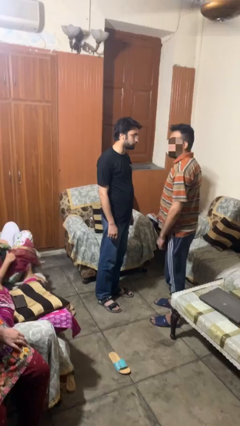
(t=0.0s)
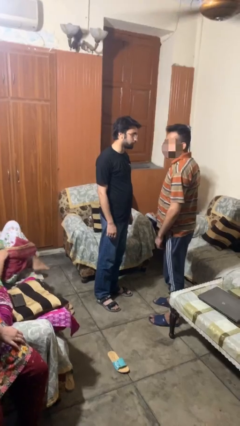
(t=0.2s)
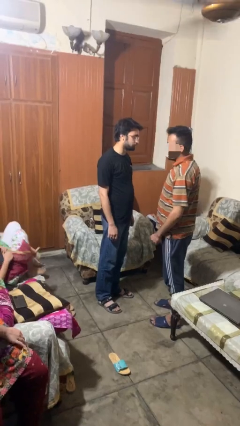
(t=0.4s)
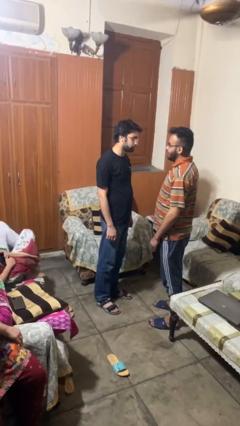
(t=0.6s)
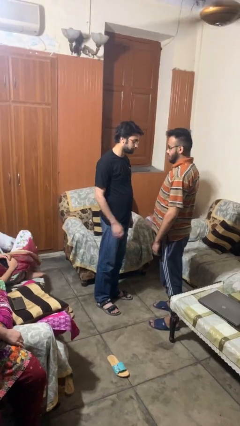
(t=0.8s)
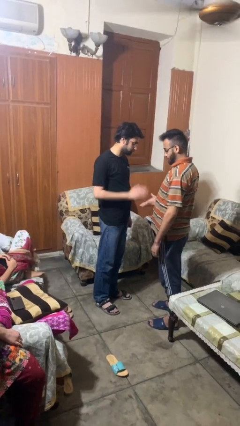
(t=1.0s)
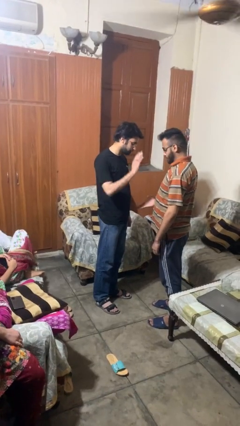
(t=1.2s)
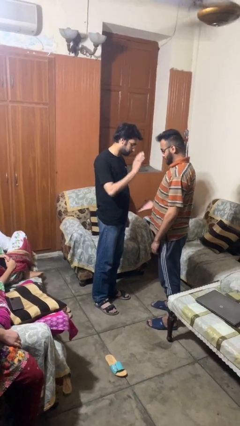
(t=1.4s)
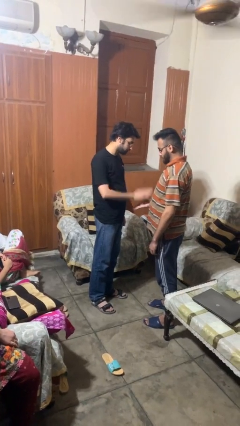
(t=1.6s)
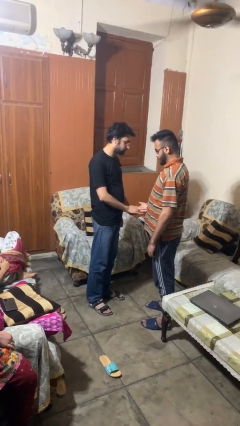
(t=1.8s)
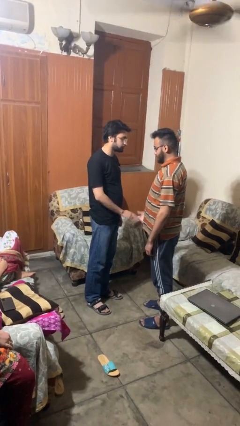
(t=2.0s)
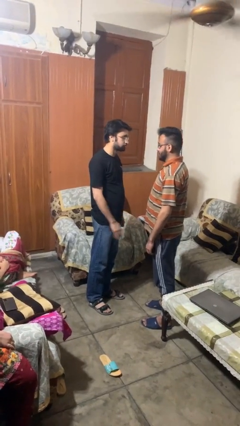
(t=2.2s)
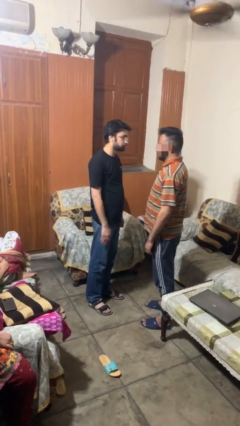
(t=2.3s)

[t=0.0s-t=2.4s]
person highfives hand

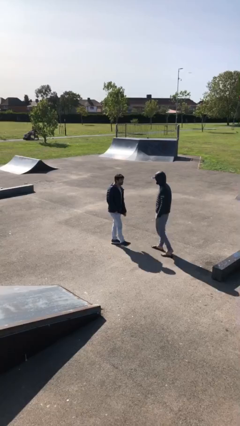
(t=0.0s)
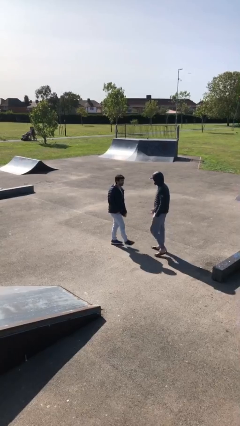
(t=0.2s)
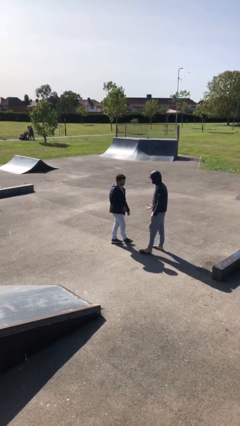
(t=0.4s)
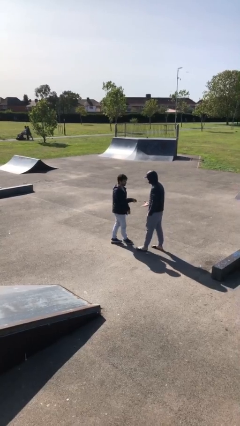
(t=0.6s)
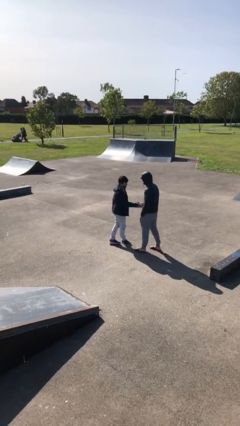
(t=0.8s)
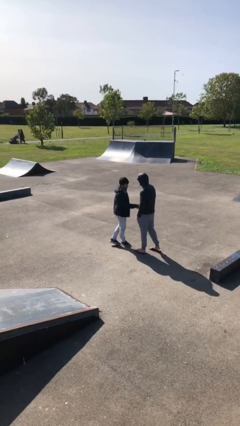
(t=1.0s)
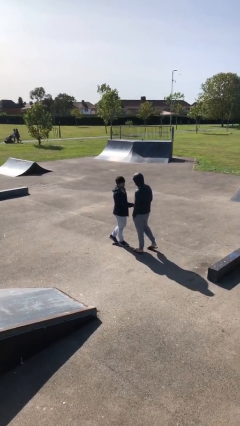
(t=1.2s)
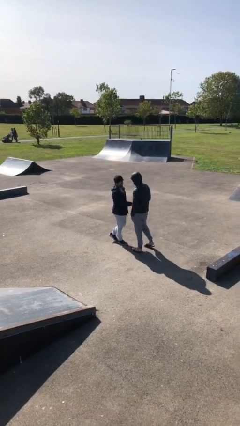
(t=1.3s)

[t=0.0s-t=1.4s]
person shakes hand

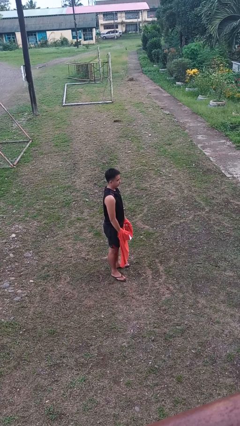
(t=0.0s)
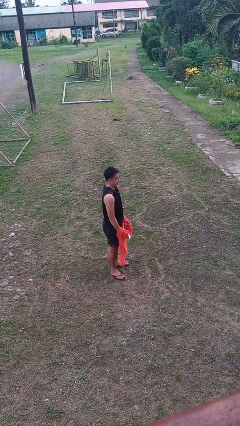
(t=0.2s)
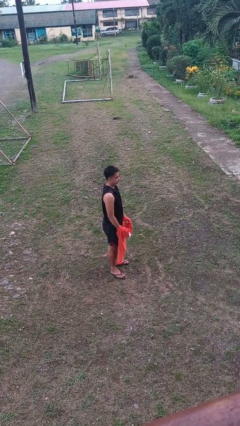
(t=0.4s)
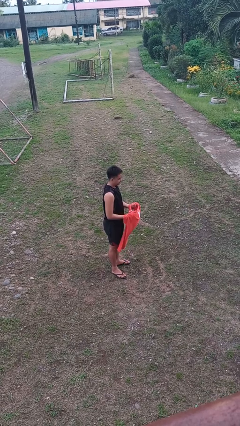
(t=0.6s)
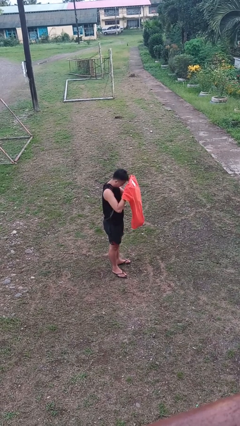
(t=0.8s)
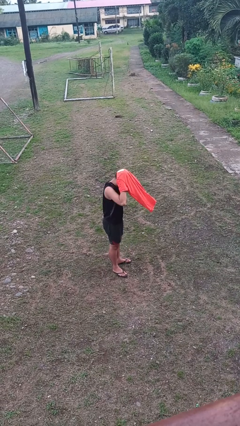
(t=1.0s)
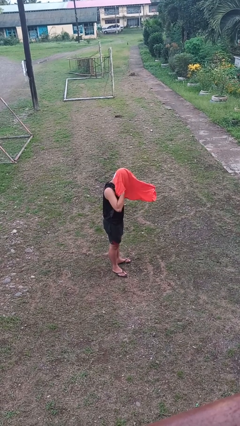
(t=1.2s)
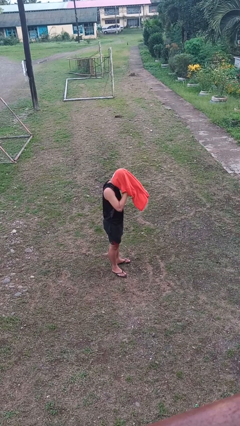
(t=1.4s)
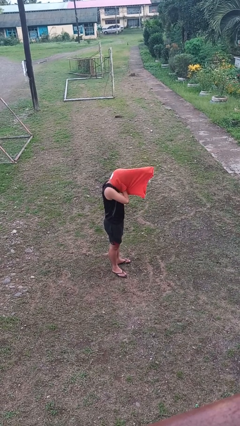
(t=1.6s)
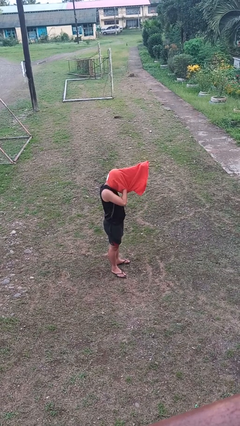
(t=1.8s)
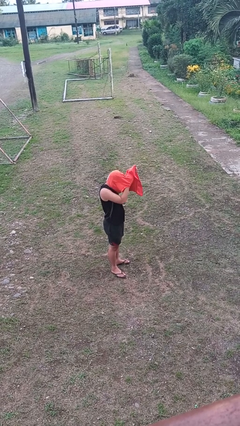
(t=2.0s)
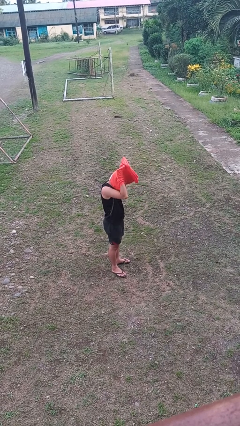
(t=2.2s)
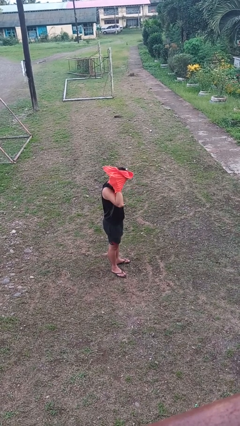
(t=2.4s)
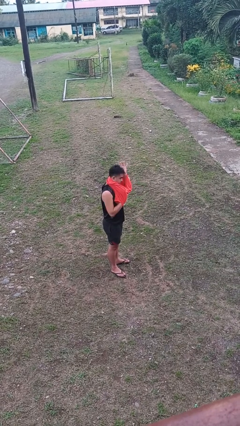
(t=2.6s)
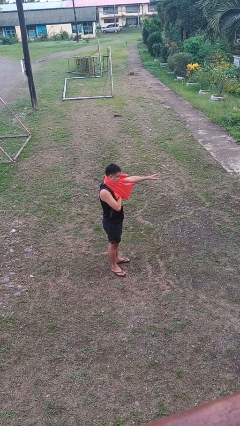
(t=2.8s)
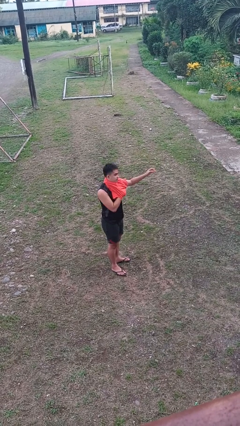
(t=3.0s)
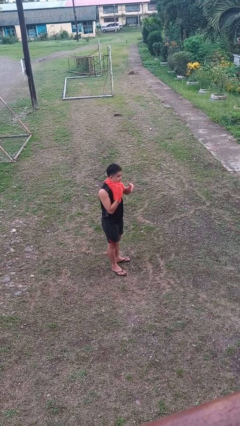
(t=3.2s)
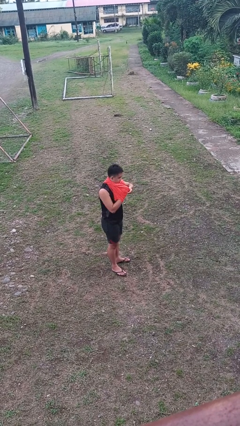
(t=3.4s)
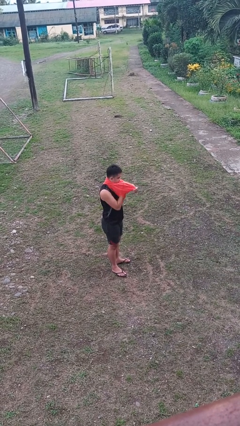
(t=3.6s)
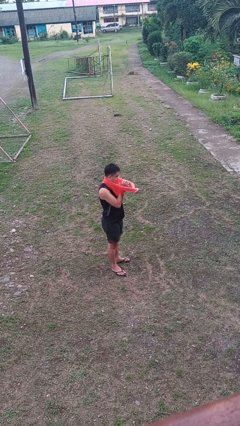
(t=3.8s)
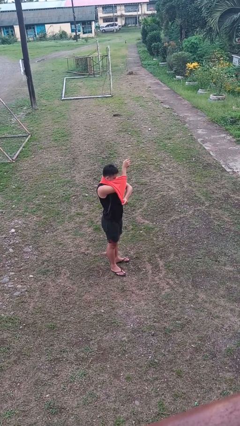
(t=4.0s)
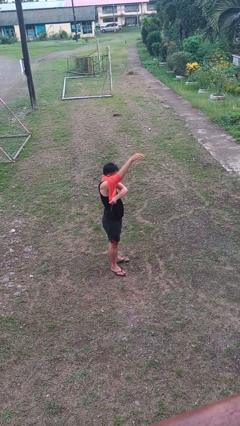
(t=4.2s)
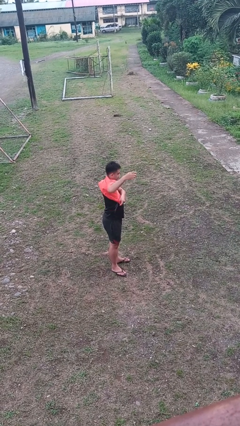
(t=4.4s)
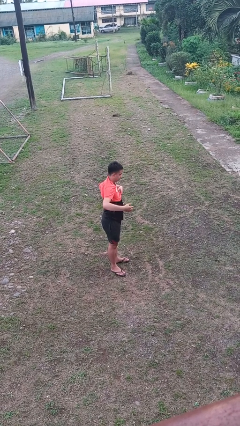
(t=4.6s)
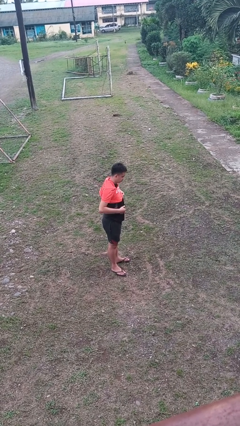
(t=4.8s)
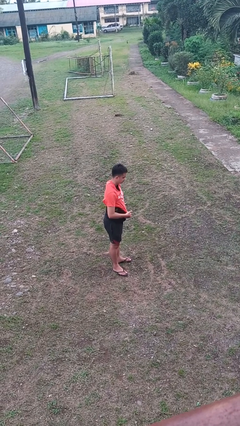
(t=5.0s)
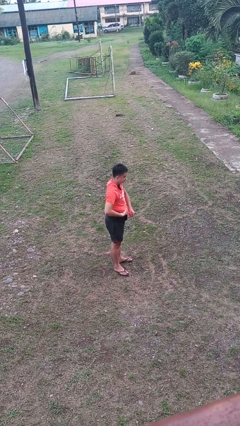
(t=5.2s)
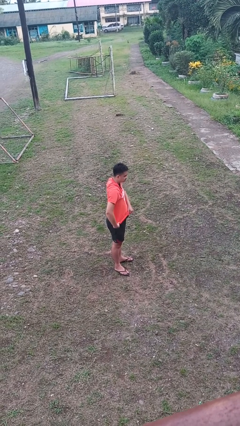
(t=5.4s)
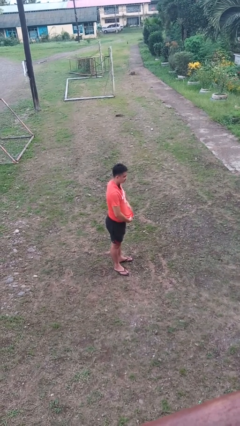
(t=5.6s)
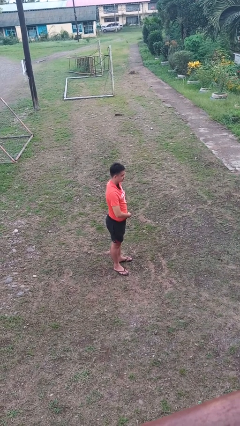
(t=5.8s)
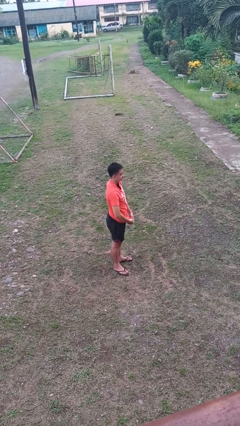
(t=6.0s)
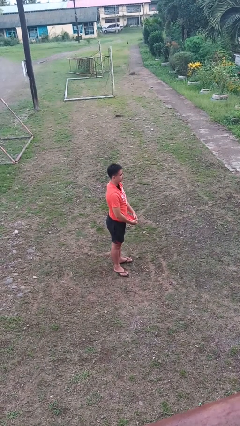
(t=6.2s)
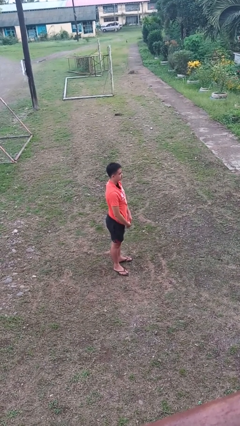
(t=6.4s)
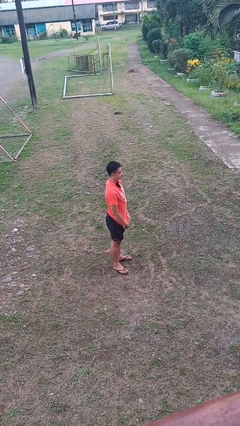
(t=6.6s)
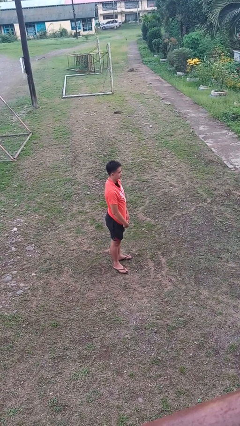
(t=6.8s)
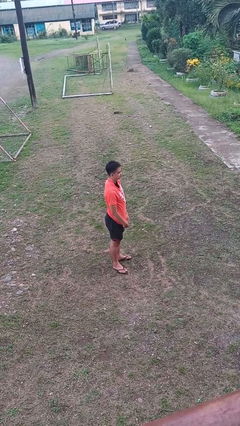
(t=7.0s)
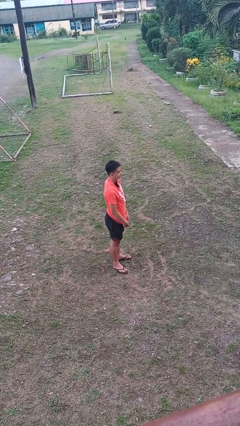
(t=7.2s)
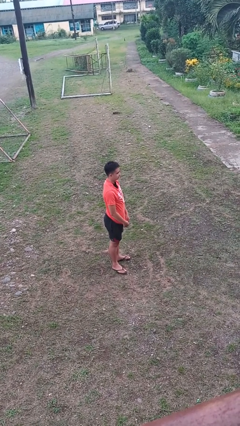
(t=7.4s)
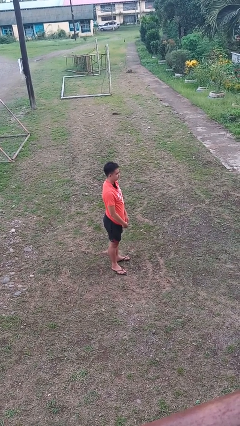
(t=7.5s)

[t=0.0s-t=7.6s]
person puts on shirt

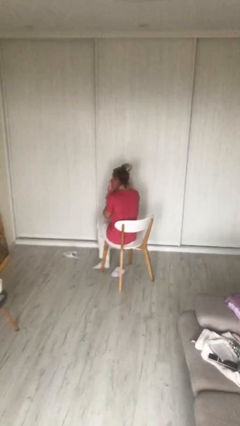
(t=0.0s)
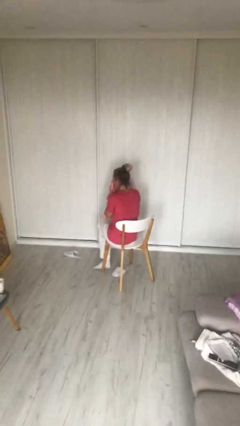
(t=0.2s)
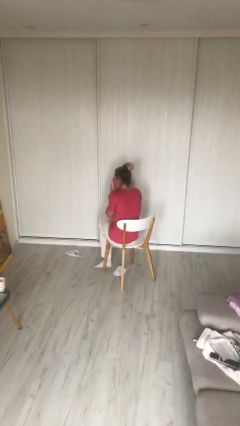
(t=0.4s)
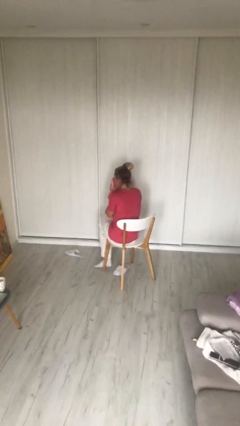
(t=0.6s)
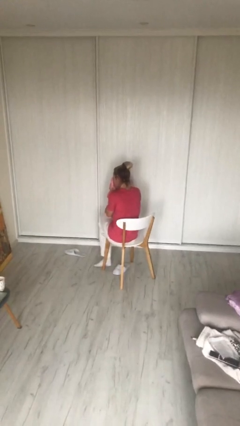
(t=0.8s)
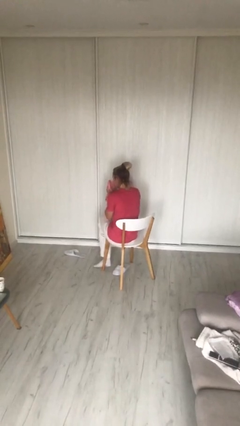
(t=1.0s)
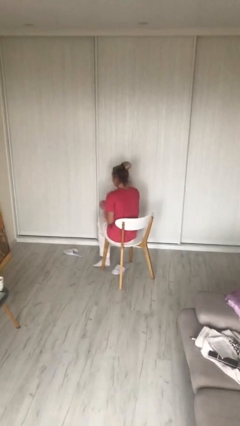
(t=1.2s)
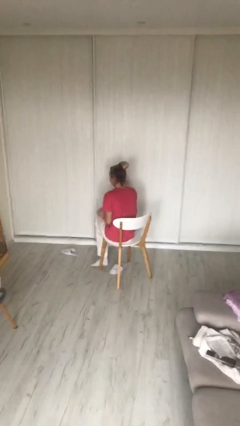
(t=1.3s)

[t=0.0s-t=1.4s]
person blows nose

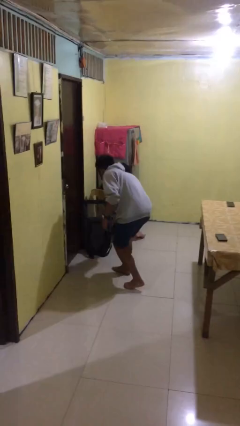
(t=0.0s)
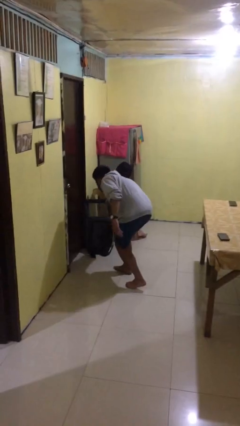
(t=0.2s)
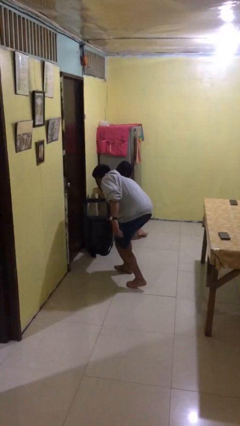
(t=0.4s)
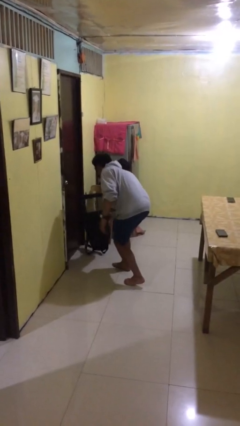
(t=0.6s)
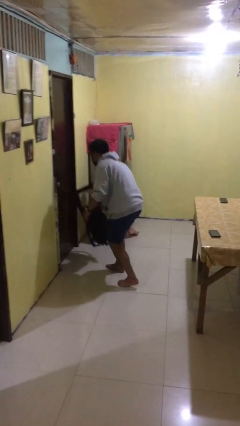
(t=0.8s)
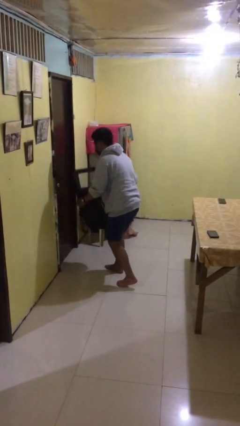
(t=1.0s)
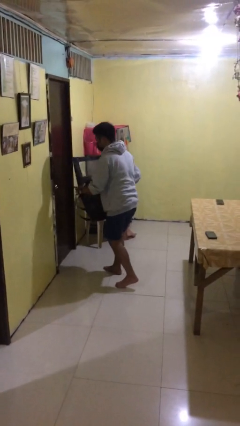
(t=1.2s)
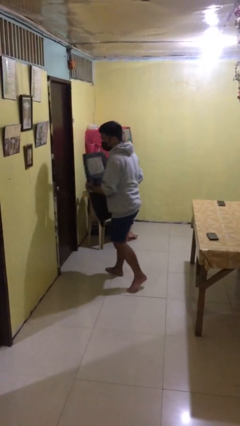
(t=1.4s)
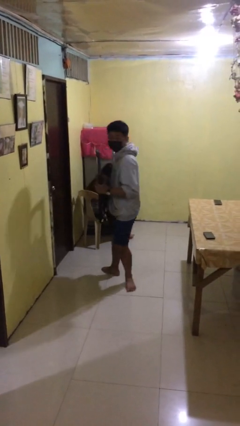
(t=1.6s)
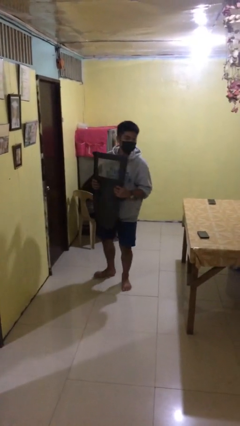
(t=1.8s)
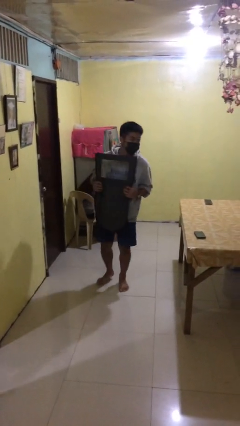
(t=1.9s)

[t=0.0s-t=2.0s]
person steals object from person

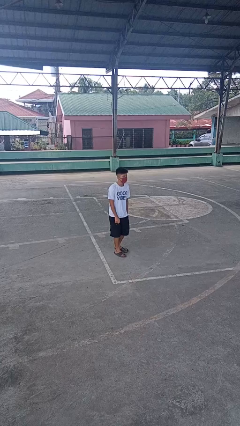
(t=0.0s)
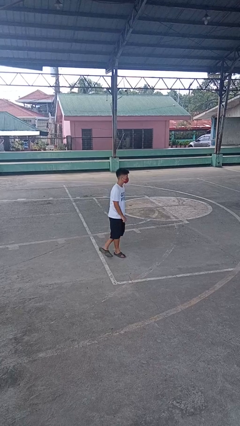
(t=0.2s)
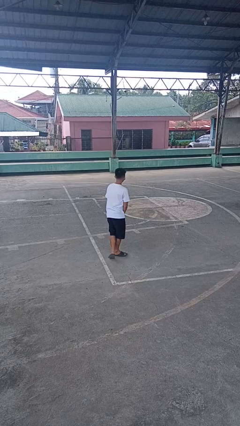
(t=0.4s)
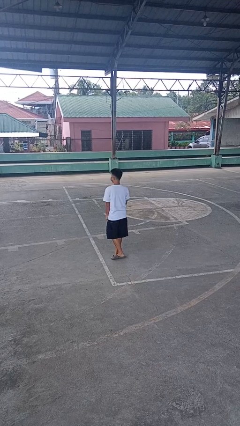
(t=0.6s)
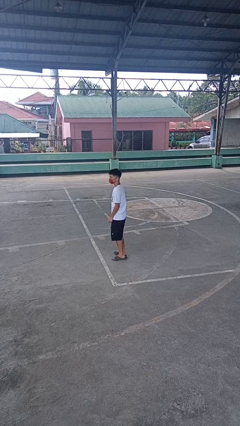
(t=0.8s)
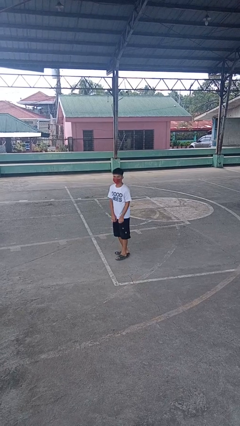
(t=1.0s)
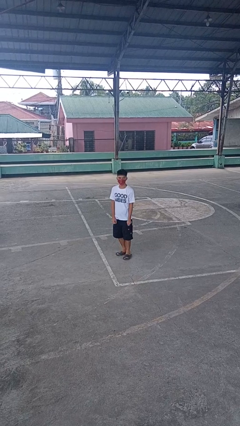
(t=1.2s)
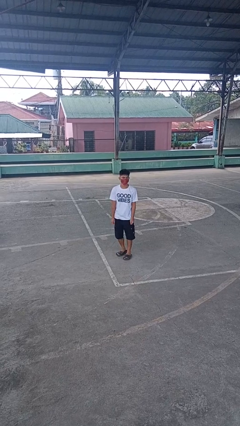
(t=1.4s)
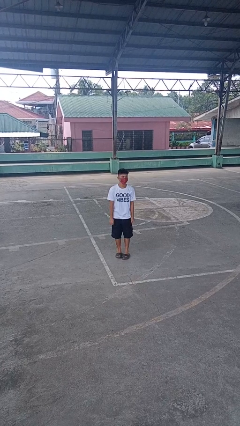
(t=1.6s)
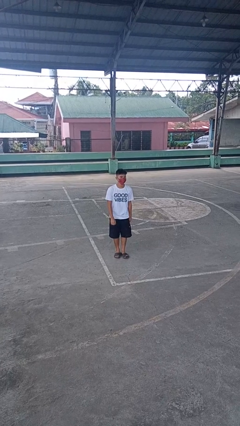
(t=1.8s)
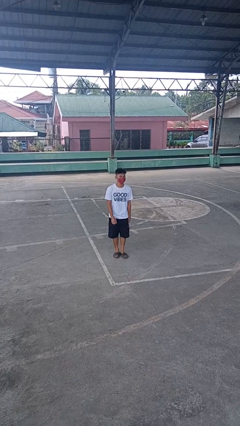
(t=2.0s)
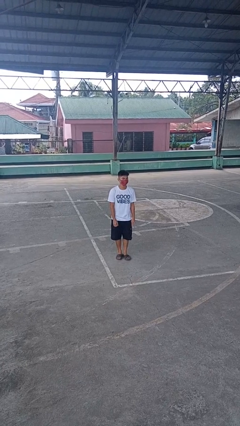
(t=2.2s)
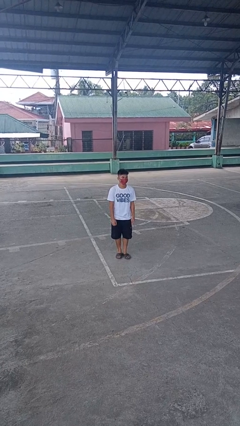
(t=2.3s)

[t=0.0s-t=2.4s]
person twirls
